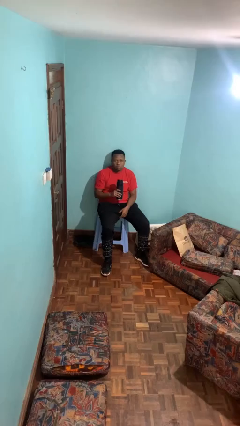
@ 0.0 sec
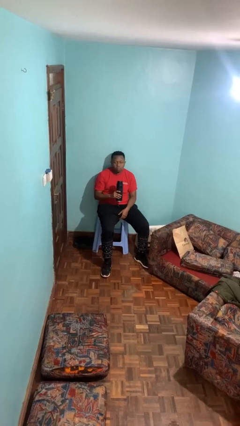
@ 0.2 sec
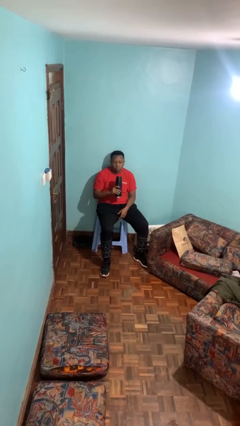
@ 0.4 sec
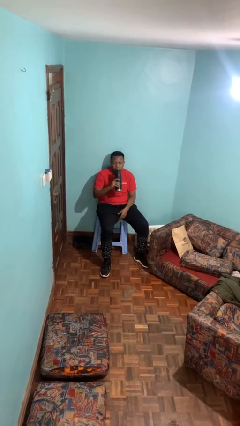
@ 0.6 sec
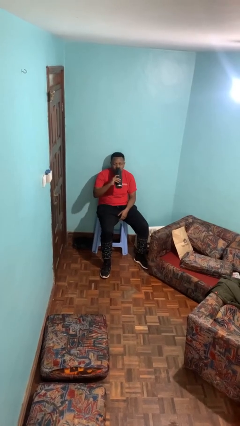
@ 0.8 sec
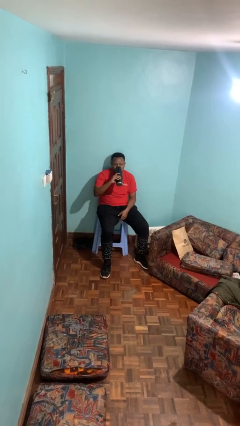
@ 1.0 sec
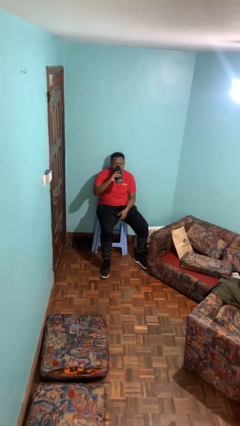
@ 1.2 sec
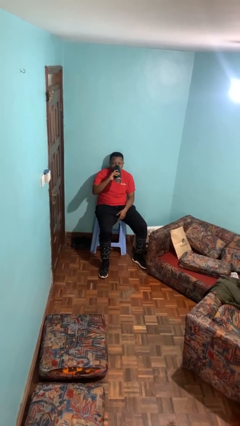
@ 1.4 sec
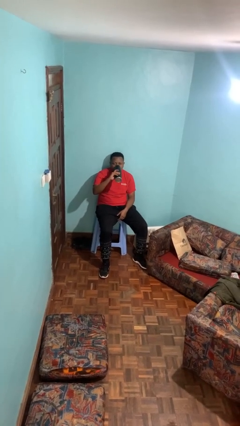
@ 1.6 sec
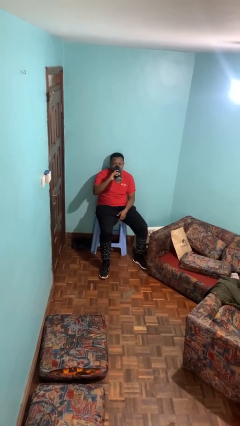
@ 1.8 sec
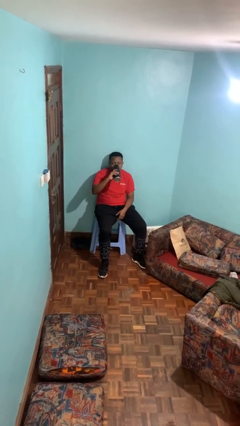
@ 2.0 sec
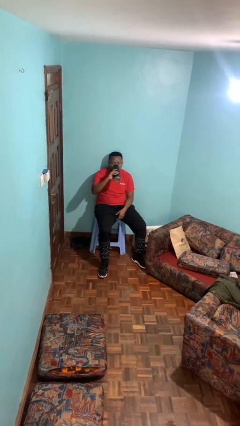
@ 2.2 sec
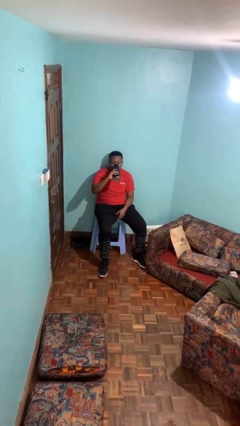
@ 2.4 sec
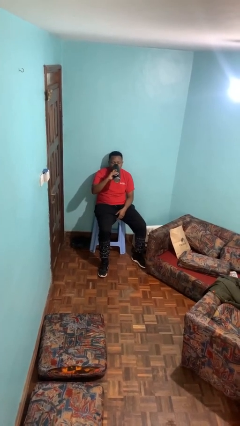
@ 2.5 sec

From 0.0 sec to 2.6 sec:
person drinks from bottle

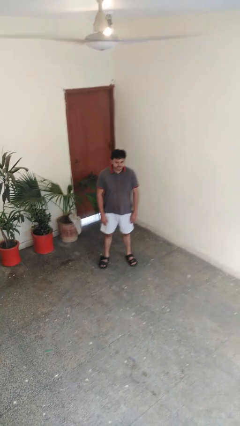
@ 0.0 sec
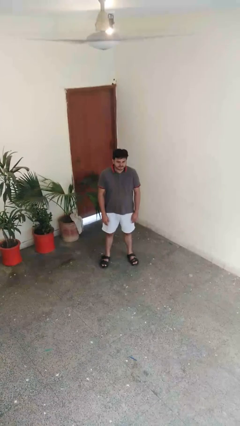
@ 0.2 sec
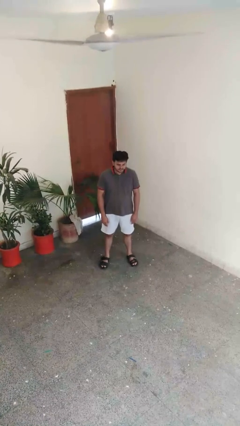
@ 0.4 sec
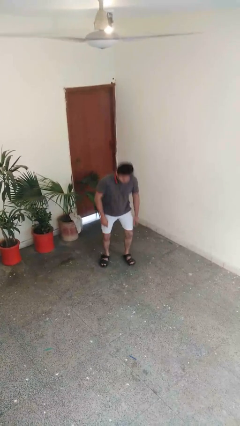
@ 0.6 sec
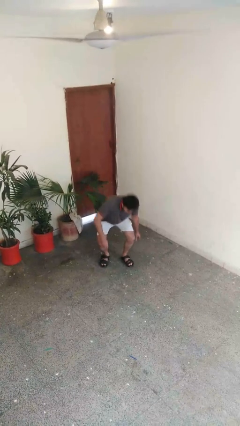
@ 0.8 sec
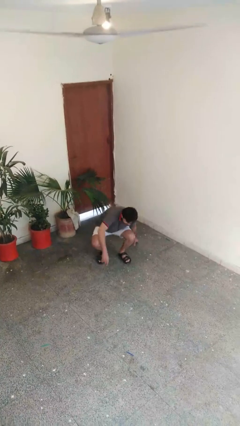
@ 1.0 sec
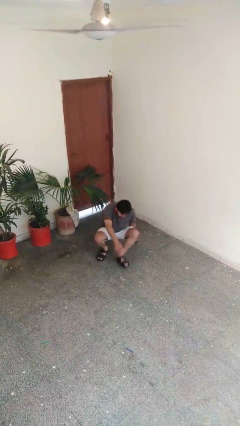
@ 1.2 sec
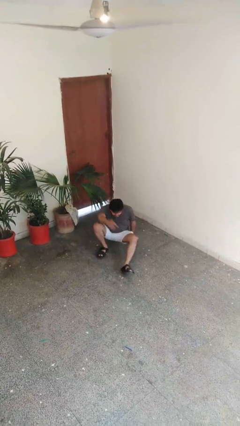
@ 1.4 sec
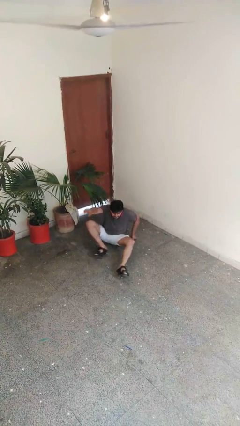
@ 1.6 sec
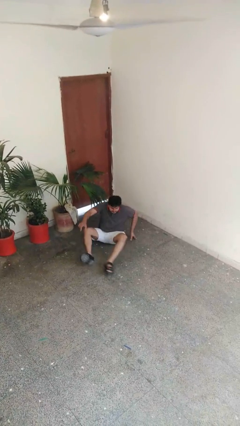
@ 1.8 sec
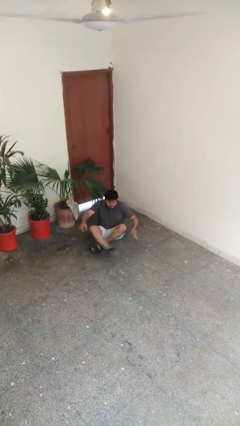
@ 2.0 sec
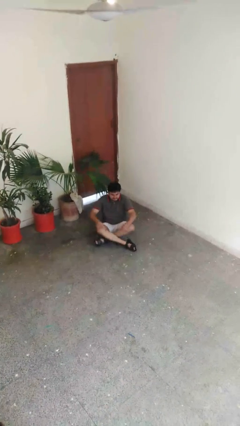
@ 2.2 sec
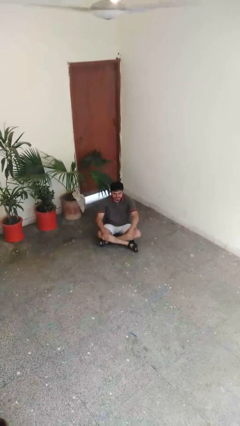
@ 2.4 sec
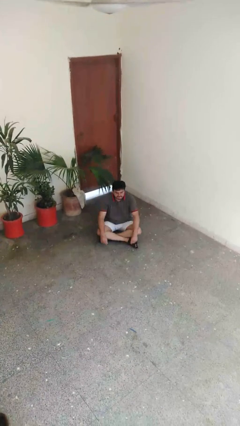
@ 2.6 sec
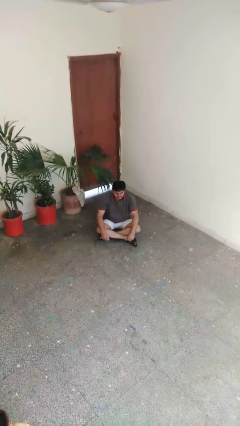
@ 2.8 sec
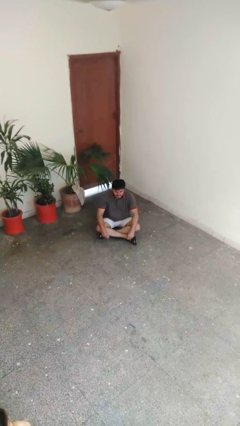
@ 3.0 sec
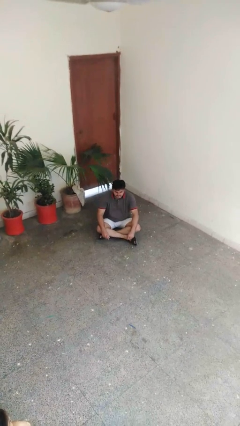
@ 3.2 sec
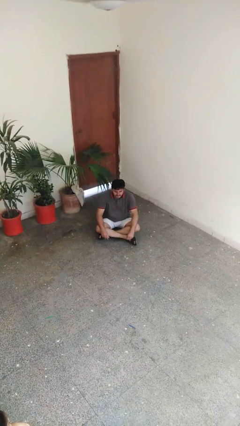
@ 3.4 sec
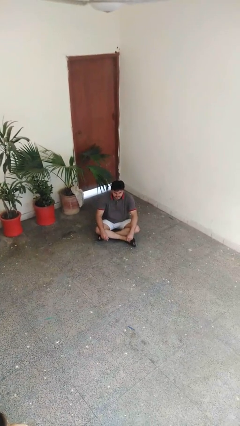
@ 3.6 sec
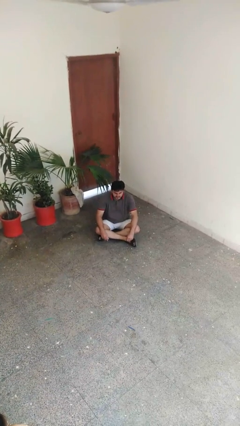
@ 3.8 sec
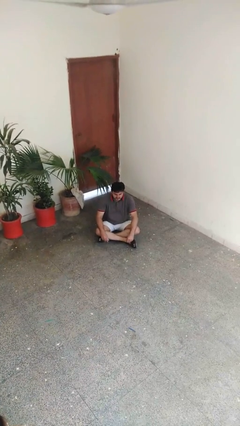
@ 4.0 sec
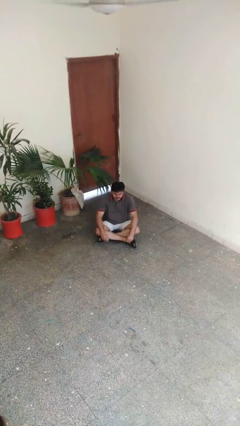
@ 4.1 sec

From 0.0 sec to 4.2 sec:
person sits crisscross

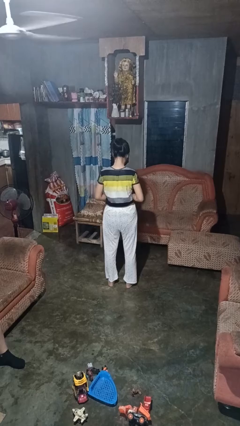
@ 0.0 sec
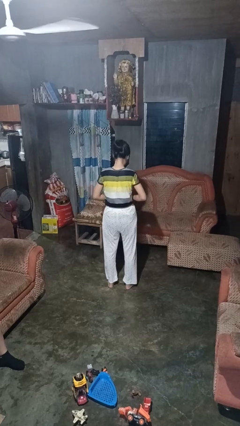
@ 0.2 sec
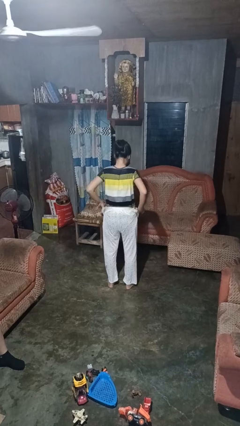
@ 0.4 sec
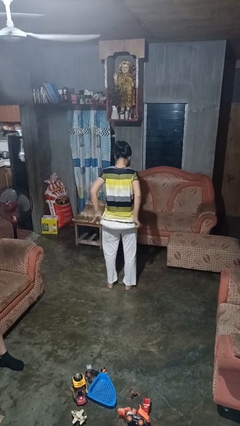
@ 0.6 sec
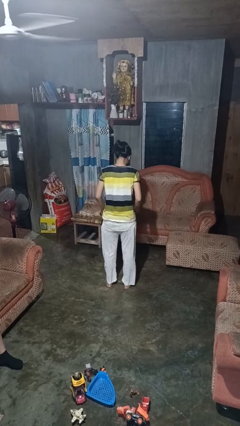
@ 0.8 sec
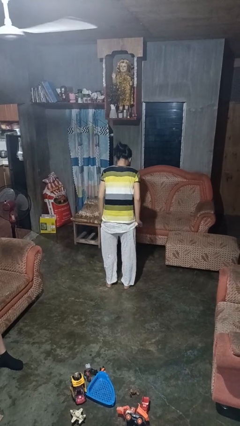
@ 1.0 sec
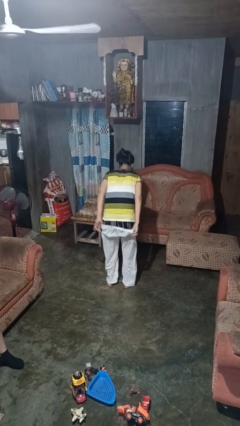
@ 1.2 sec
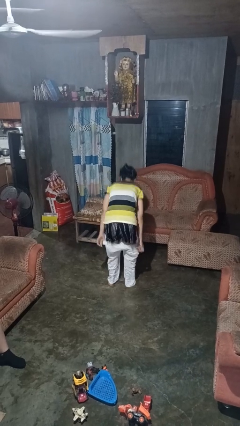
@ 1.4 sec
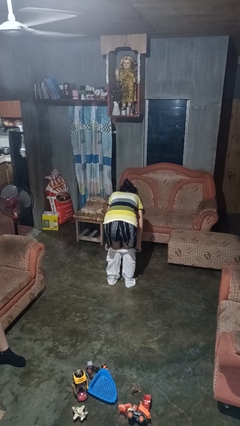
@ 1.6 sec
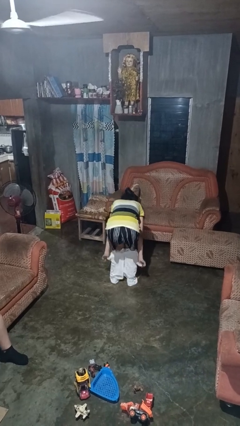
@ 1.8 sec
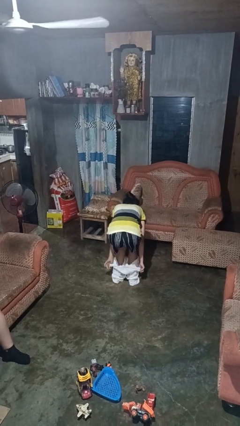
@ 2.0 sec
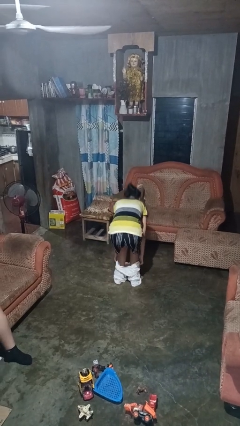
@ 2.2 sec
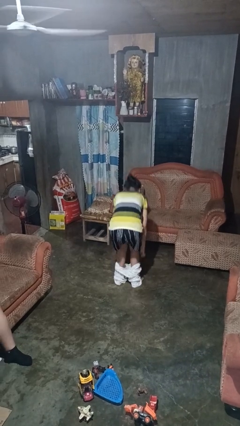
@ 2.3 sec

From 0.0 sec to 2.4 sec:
person takes off pants

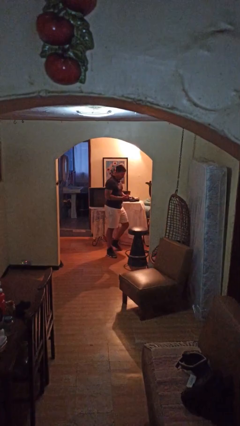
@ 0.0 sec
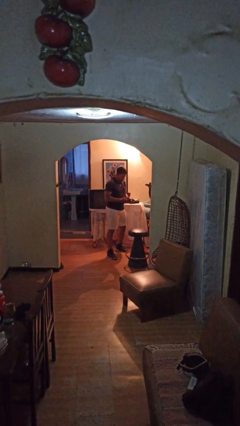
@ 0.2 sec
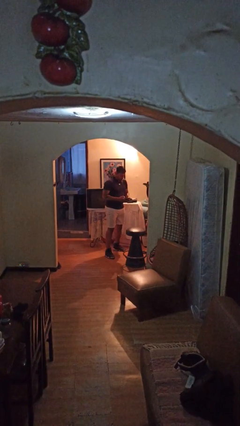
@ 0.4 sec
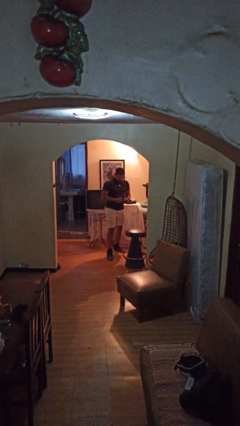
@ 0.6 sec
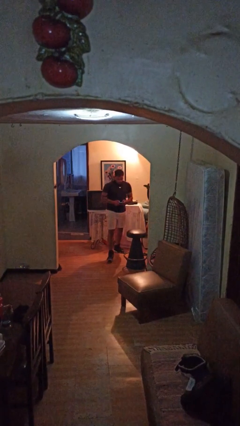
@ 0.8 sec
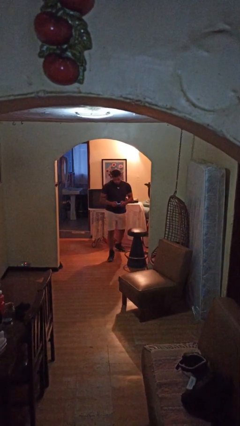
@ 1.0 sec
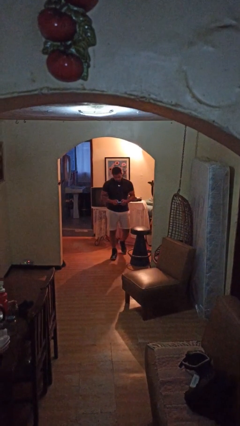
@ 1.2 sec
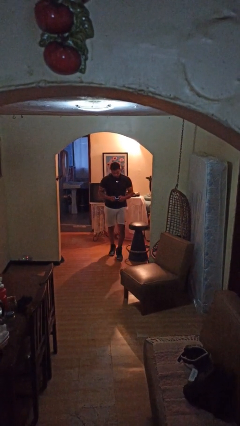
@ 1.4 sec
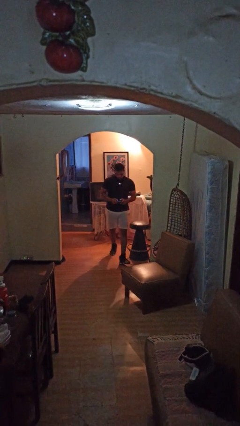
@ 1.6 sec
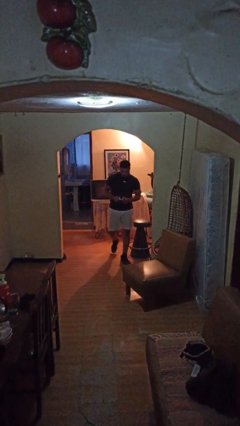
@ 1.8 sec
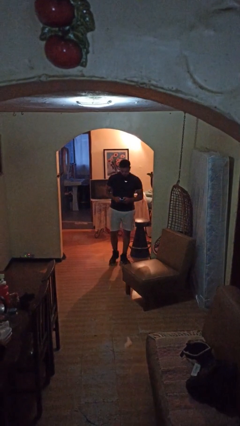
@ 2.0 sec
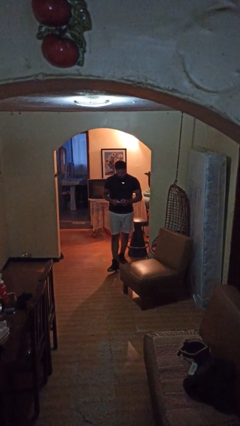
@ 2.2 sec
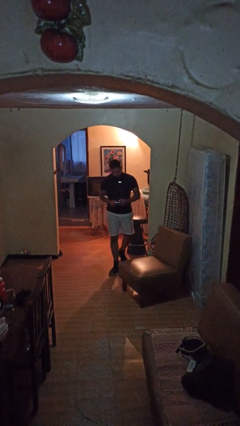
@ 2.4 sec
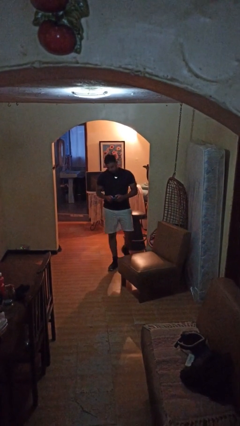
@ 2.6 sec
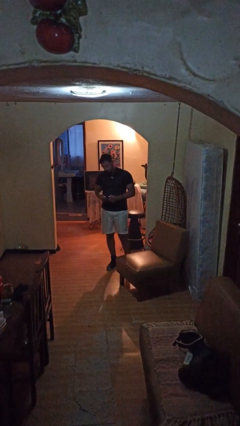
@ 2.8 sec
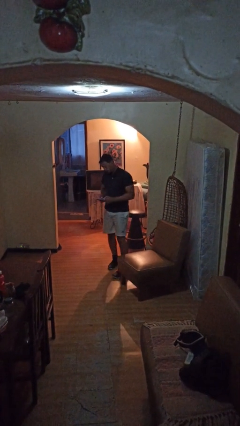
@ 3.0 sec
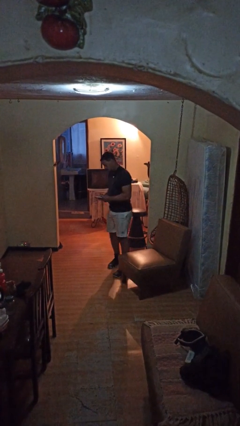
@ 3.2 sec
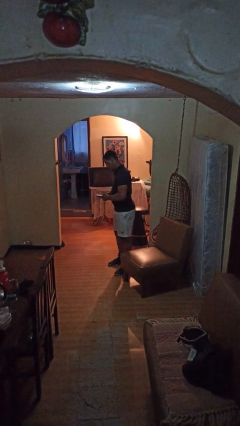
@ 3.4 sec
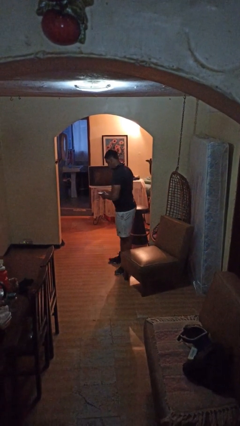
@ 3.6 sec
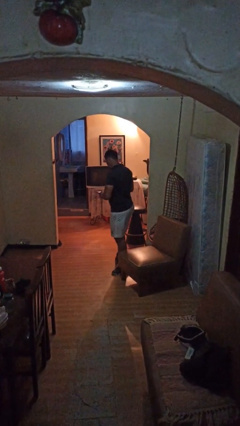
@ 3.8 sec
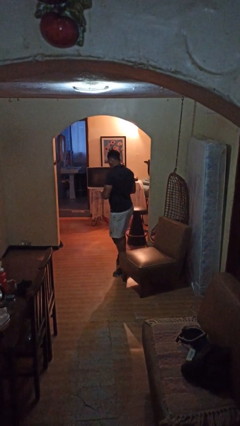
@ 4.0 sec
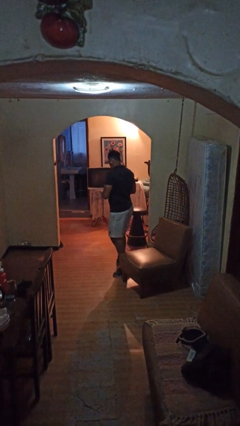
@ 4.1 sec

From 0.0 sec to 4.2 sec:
person enters scene through structure

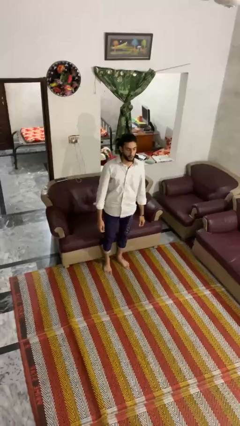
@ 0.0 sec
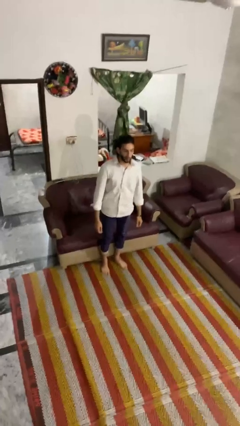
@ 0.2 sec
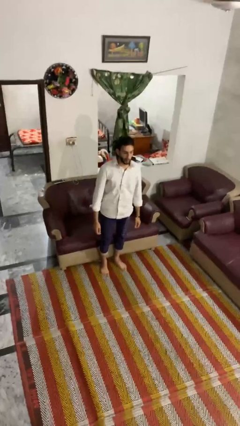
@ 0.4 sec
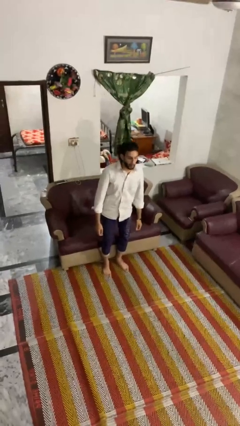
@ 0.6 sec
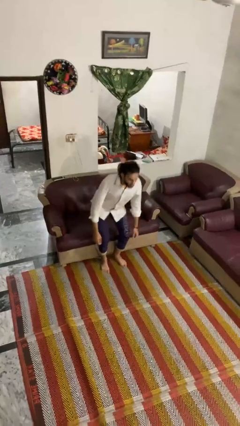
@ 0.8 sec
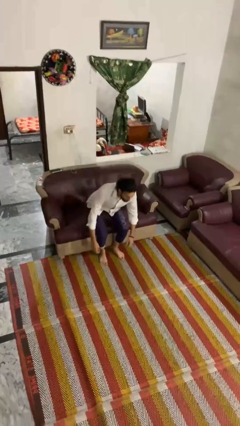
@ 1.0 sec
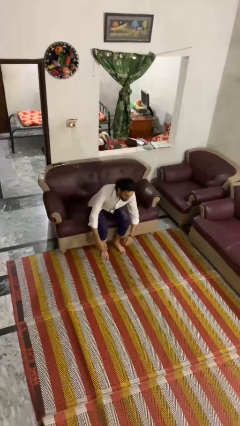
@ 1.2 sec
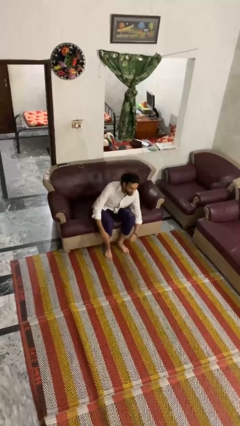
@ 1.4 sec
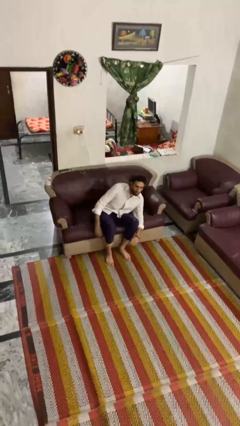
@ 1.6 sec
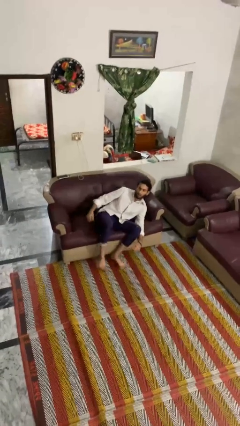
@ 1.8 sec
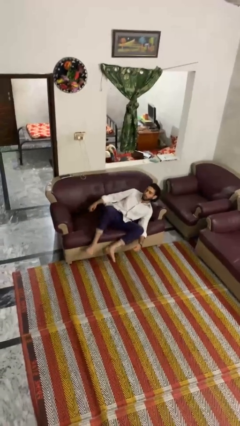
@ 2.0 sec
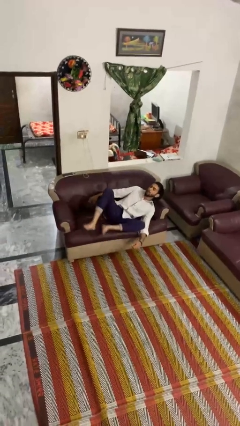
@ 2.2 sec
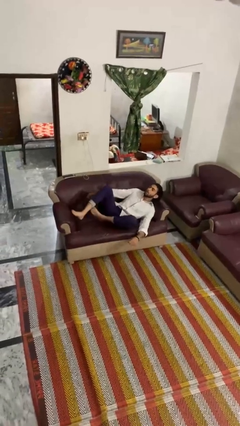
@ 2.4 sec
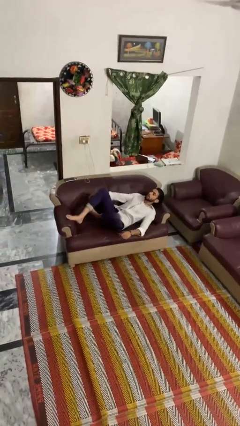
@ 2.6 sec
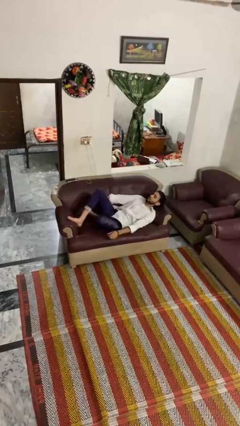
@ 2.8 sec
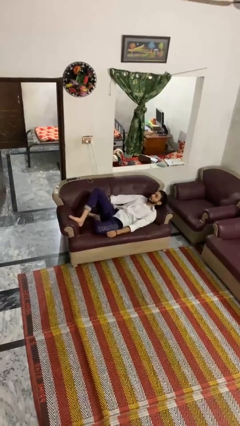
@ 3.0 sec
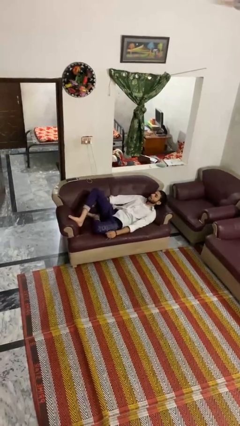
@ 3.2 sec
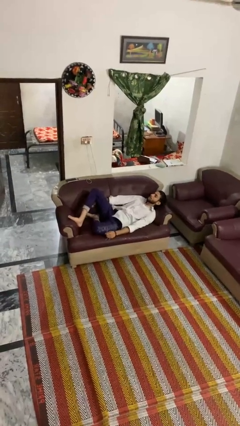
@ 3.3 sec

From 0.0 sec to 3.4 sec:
person lies down on couch

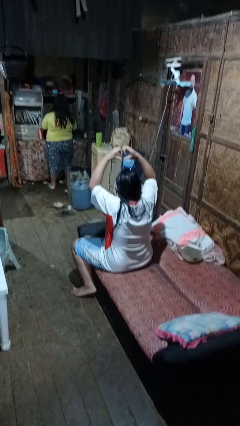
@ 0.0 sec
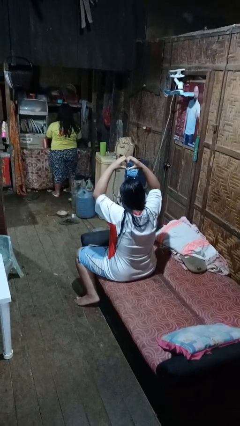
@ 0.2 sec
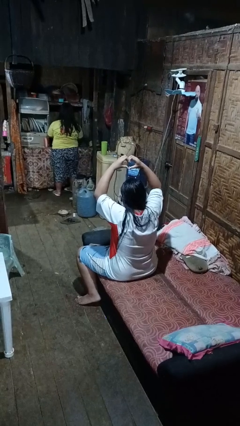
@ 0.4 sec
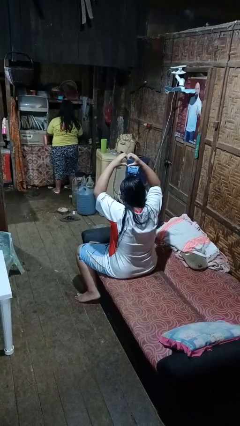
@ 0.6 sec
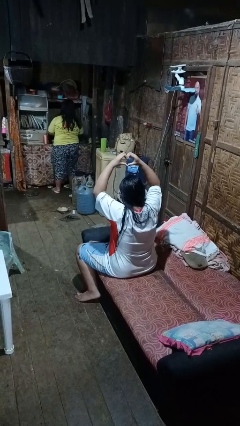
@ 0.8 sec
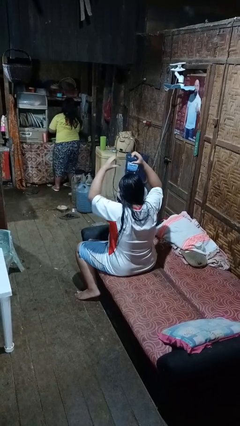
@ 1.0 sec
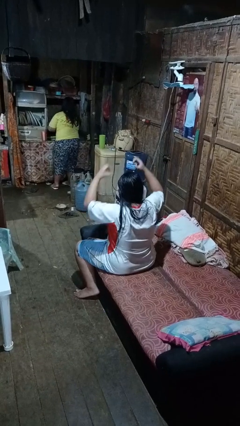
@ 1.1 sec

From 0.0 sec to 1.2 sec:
person gestures heart
